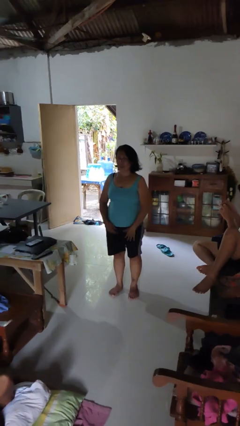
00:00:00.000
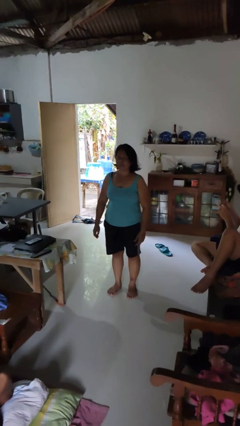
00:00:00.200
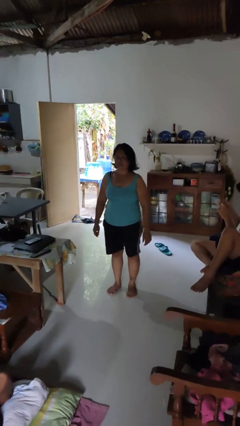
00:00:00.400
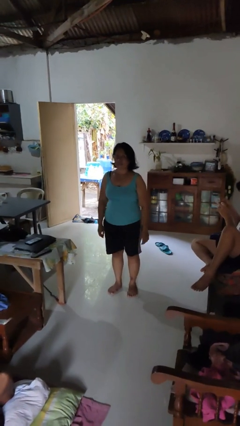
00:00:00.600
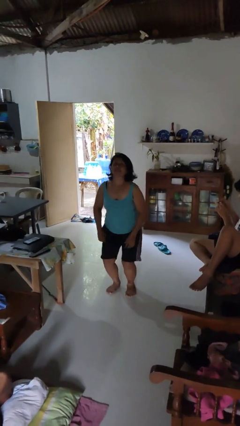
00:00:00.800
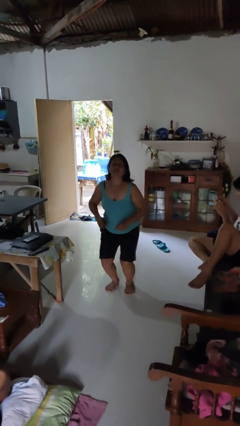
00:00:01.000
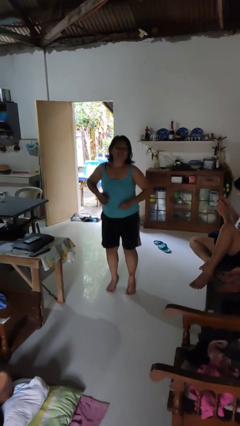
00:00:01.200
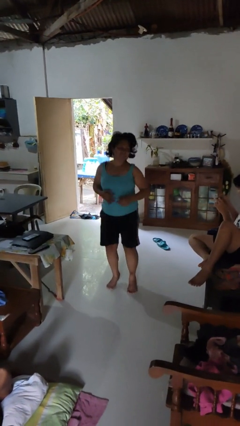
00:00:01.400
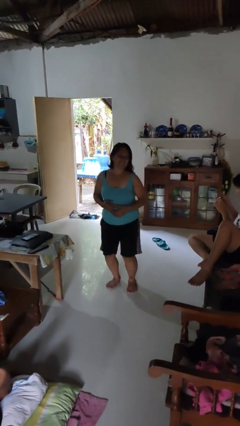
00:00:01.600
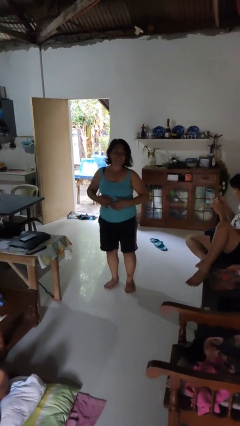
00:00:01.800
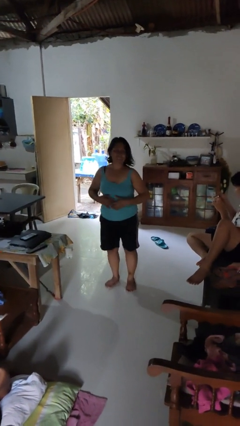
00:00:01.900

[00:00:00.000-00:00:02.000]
person jumps

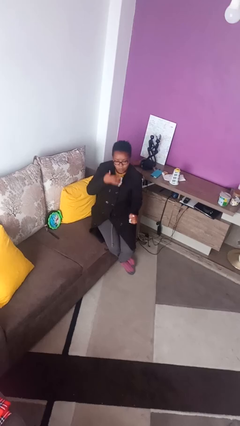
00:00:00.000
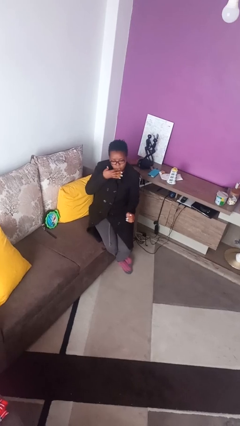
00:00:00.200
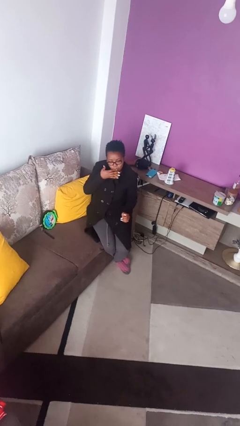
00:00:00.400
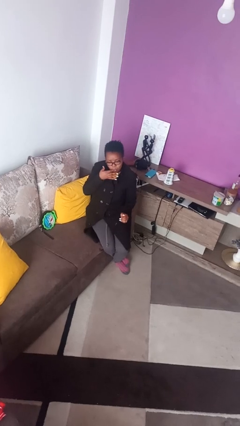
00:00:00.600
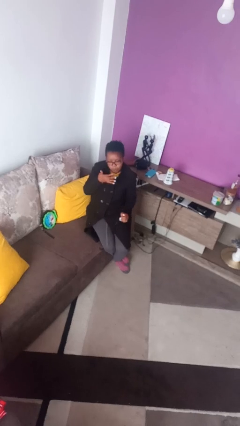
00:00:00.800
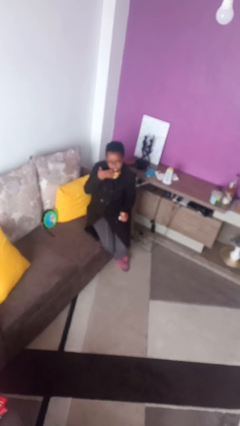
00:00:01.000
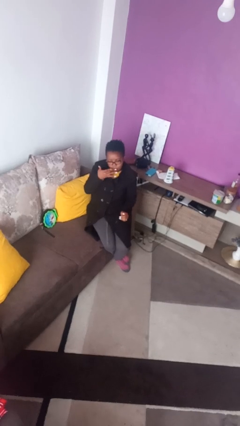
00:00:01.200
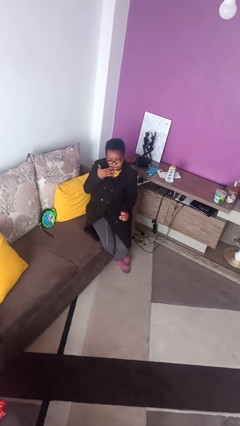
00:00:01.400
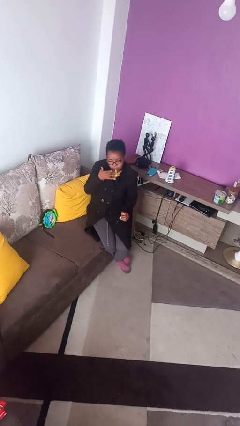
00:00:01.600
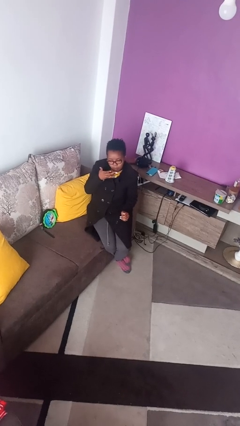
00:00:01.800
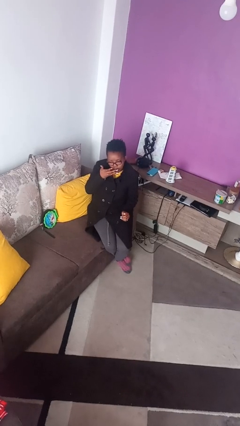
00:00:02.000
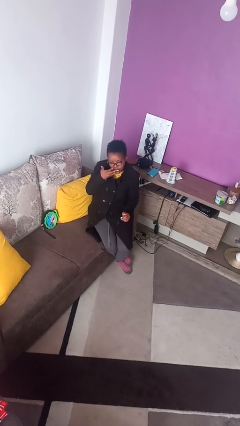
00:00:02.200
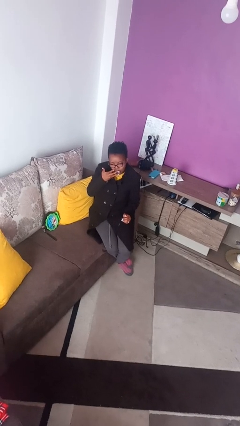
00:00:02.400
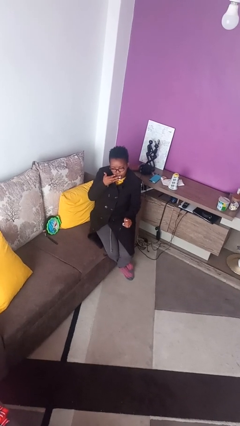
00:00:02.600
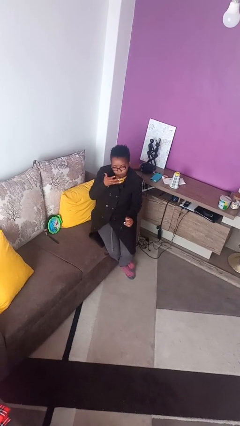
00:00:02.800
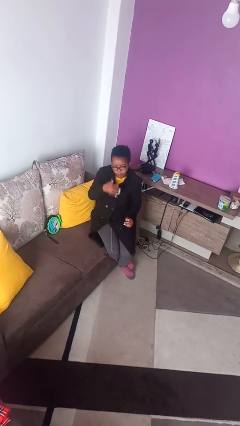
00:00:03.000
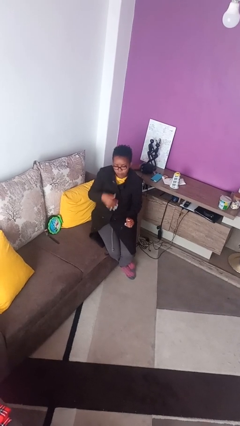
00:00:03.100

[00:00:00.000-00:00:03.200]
person licks fingers

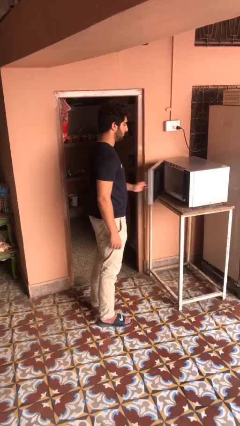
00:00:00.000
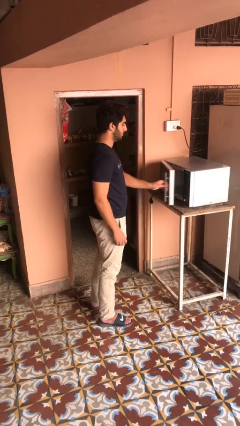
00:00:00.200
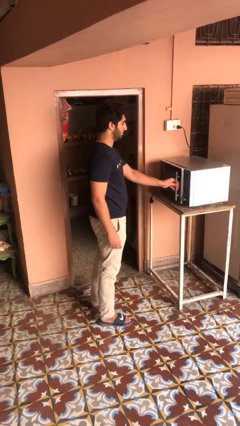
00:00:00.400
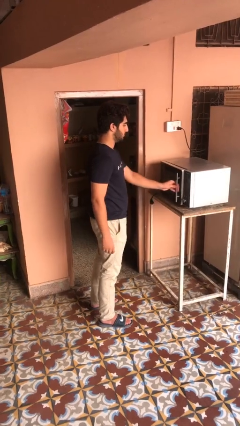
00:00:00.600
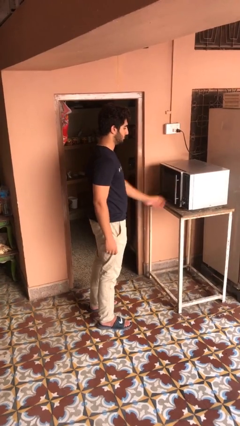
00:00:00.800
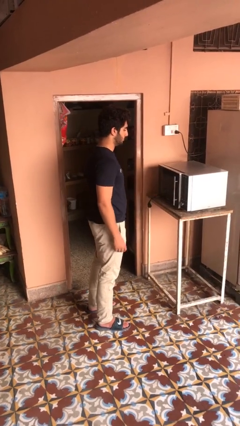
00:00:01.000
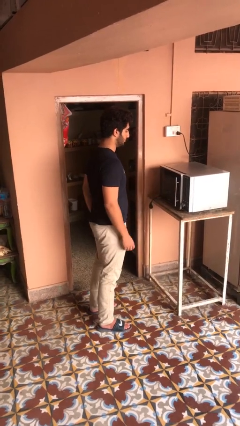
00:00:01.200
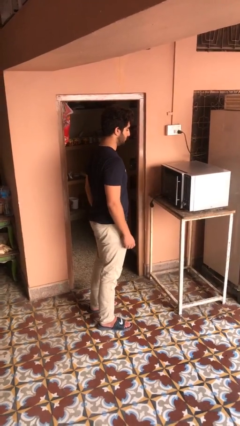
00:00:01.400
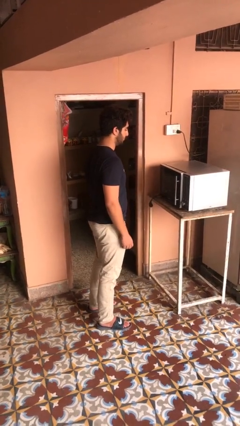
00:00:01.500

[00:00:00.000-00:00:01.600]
person closes microwave

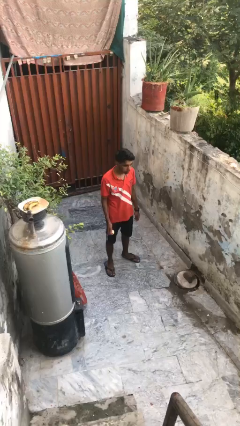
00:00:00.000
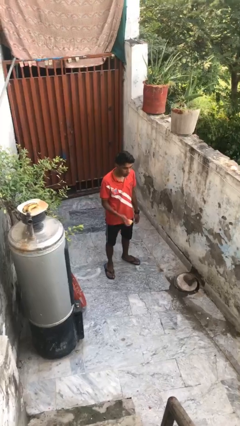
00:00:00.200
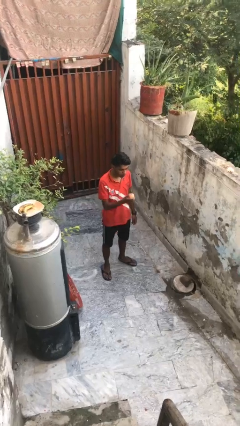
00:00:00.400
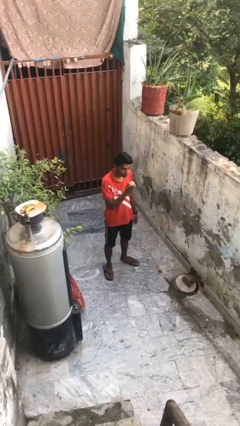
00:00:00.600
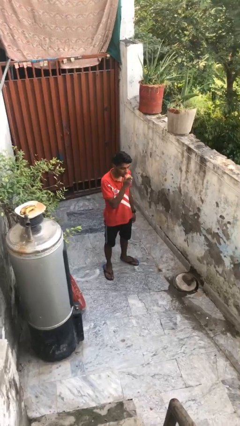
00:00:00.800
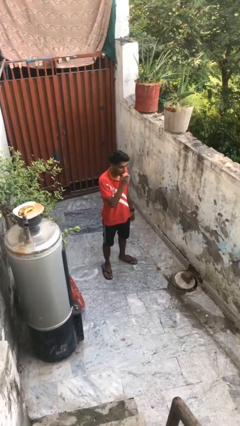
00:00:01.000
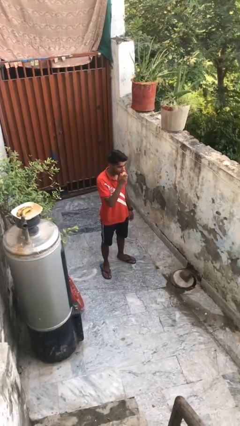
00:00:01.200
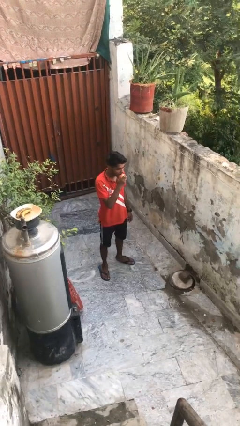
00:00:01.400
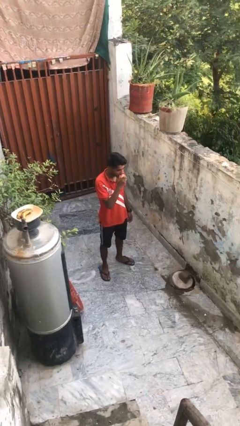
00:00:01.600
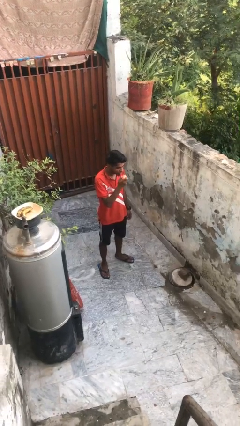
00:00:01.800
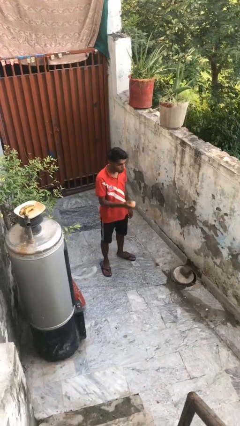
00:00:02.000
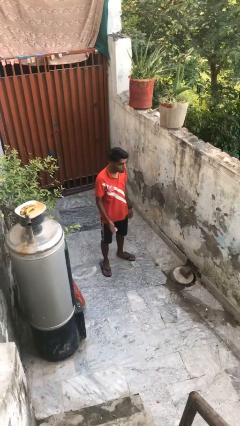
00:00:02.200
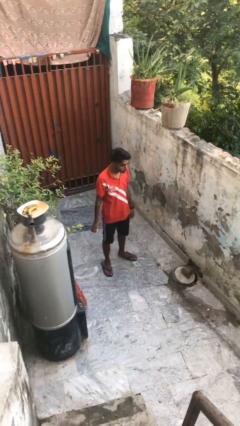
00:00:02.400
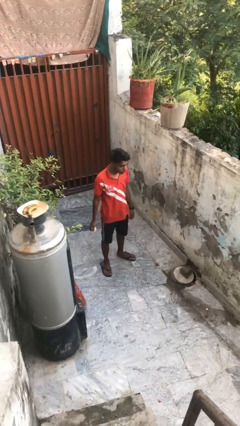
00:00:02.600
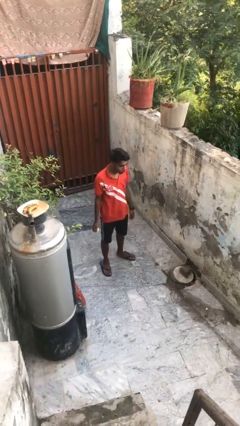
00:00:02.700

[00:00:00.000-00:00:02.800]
person eats apple

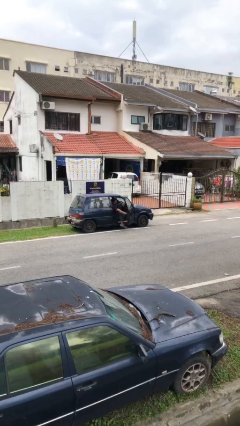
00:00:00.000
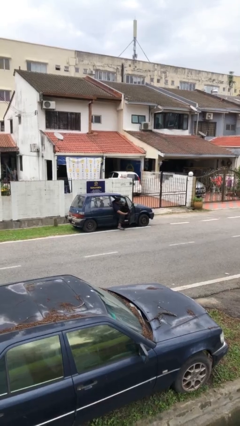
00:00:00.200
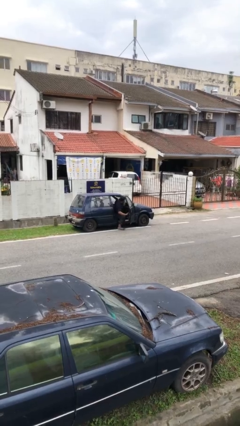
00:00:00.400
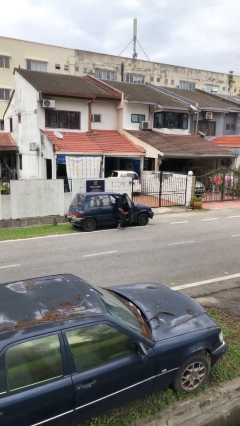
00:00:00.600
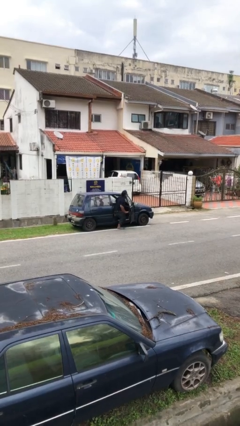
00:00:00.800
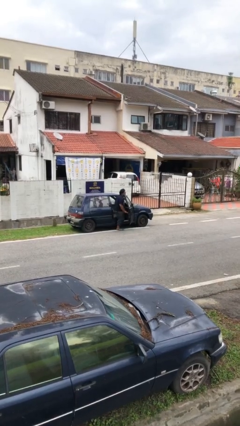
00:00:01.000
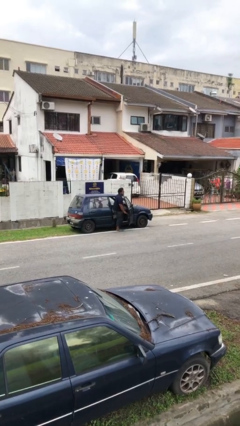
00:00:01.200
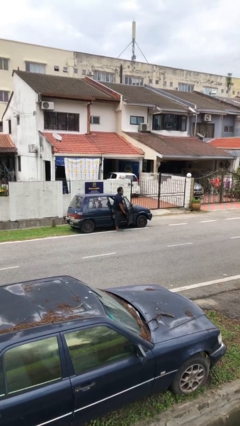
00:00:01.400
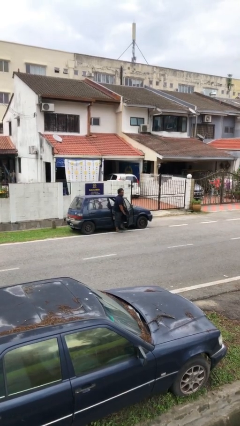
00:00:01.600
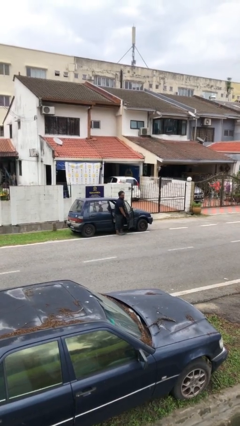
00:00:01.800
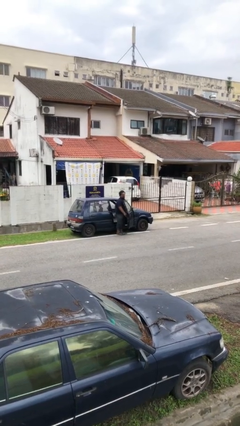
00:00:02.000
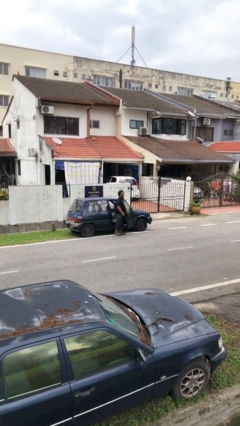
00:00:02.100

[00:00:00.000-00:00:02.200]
person exits car

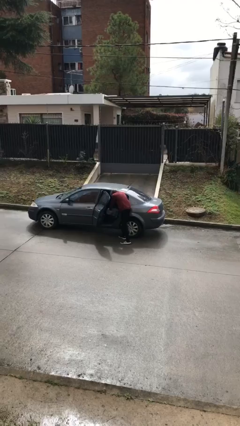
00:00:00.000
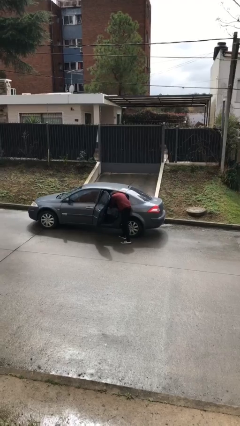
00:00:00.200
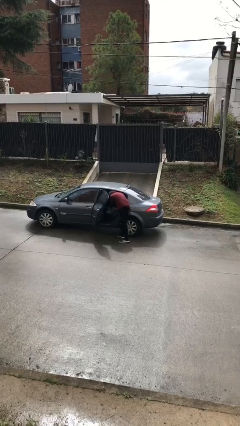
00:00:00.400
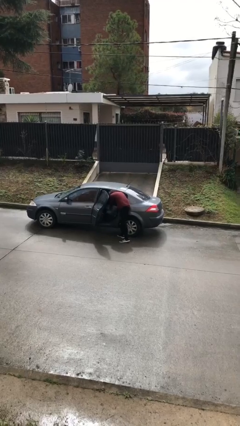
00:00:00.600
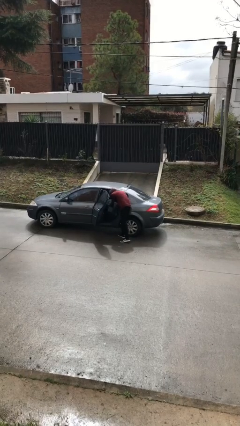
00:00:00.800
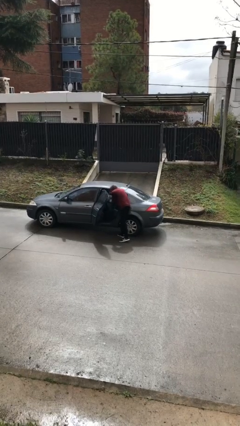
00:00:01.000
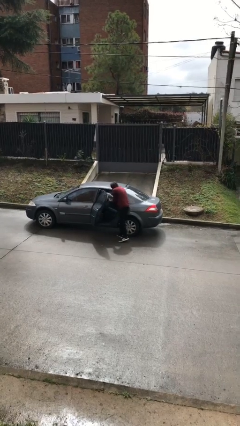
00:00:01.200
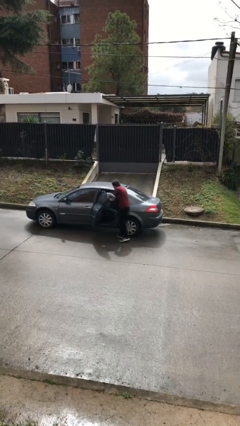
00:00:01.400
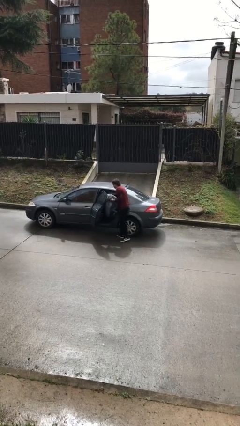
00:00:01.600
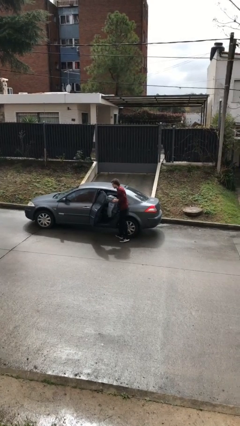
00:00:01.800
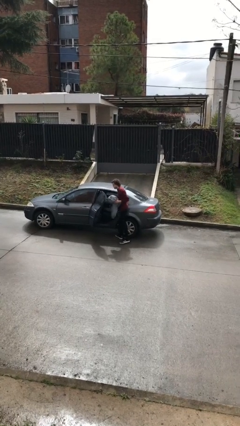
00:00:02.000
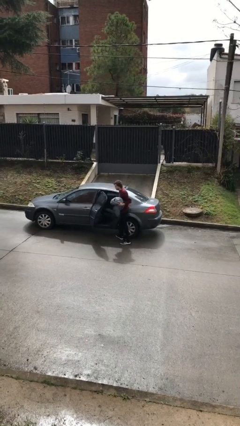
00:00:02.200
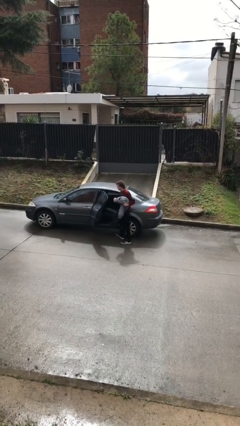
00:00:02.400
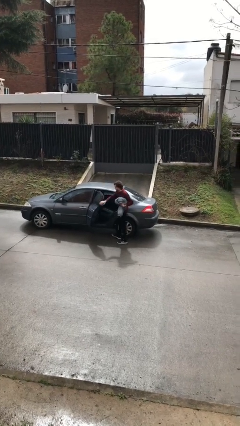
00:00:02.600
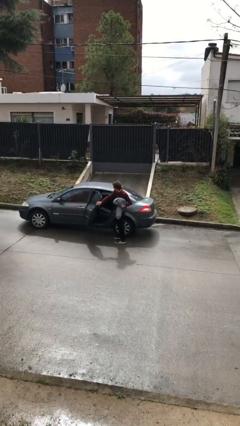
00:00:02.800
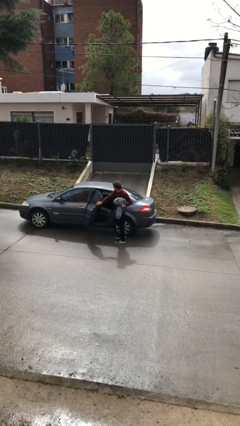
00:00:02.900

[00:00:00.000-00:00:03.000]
person unloads car

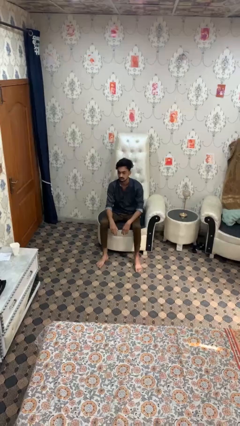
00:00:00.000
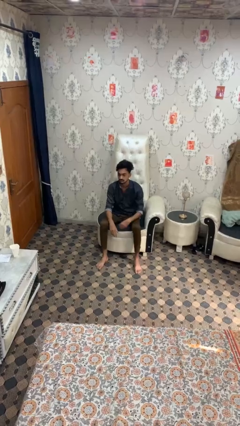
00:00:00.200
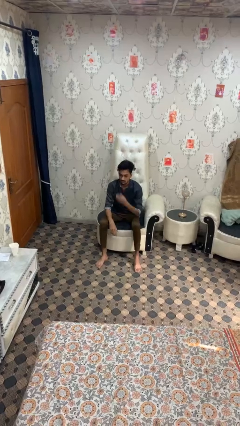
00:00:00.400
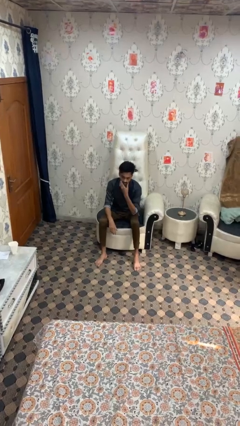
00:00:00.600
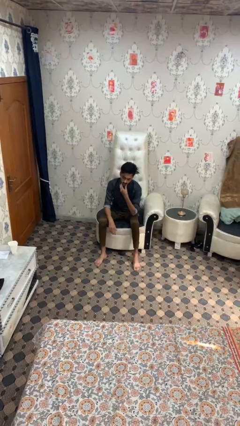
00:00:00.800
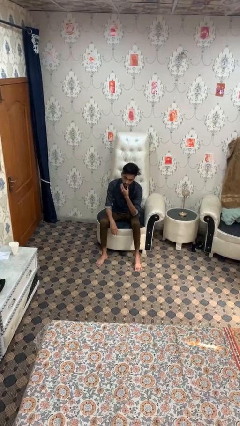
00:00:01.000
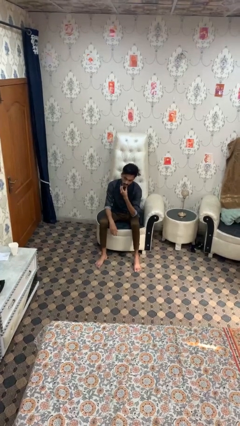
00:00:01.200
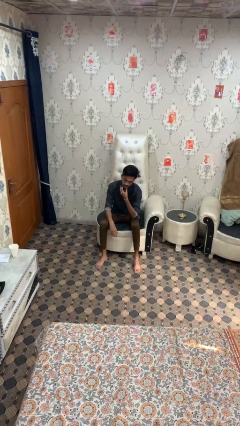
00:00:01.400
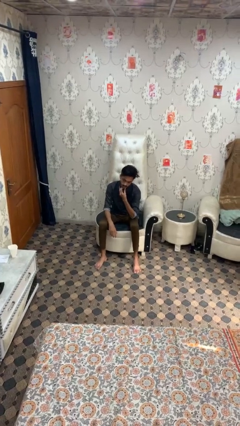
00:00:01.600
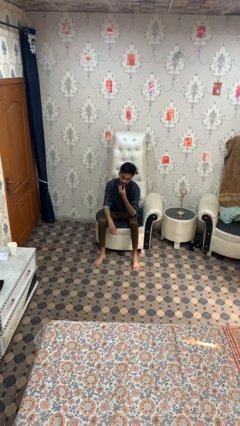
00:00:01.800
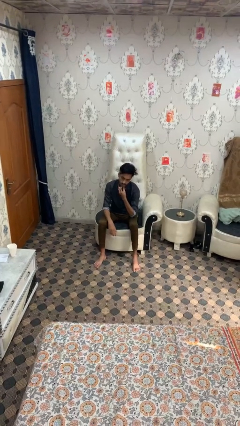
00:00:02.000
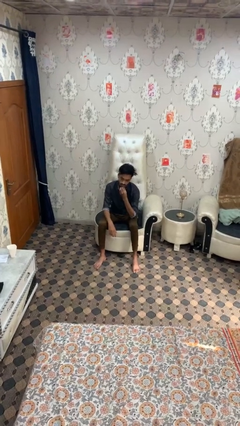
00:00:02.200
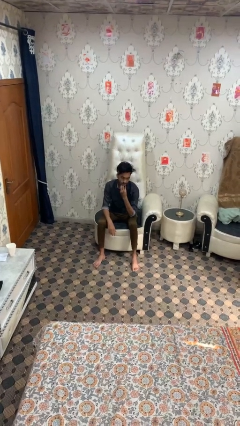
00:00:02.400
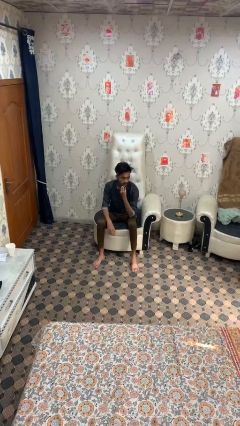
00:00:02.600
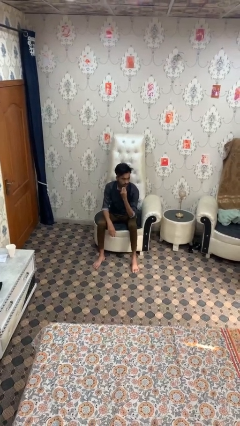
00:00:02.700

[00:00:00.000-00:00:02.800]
person strokes chin
